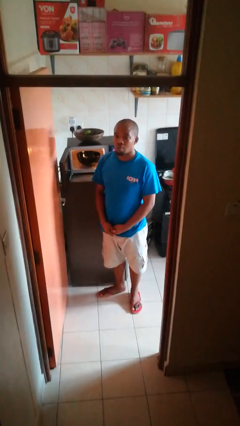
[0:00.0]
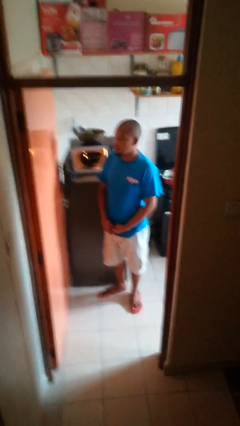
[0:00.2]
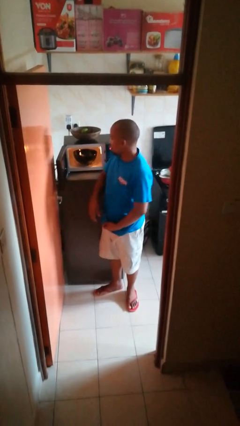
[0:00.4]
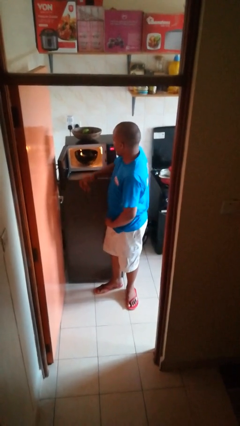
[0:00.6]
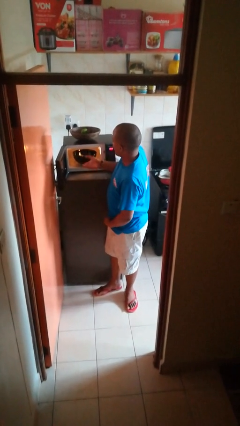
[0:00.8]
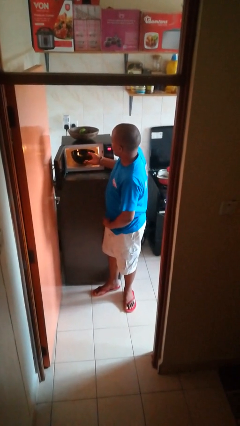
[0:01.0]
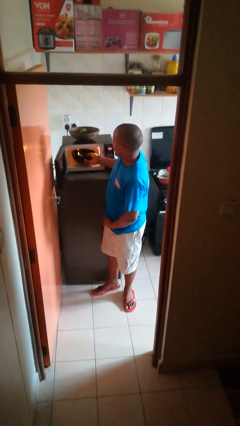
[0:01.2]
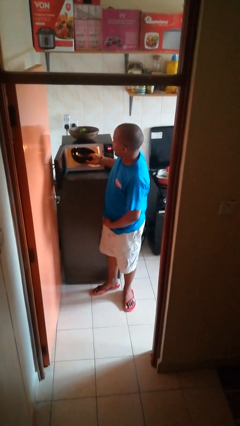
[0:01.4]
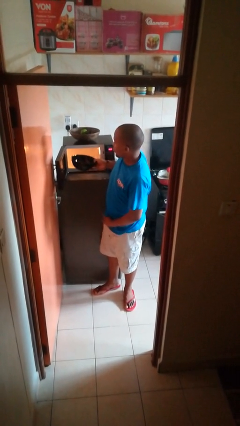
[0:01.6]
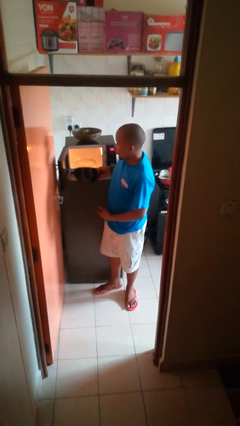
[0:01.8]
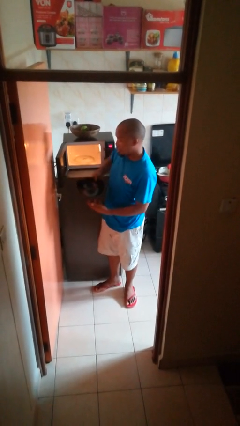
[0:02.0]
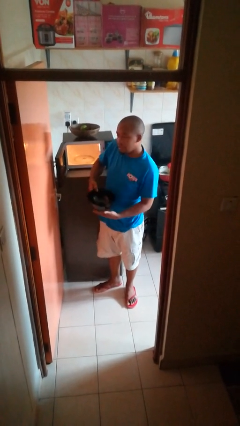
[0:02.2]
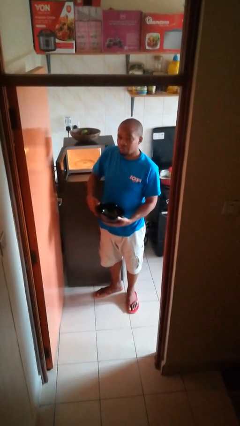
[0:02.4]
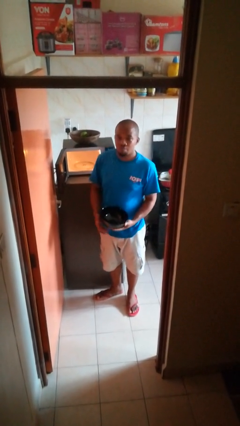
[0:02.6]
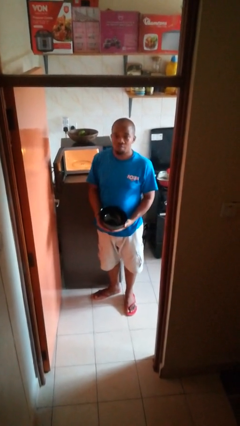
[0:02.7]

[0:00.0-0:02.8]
person takes object from microwave

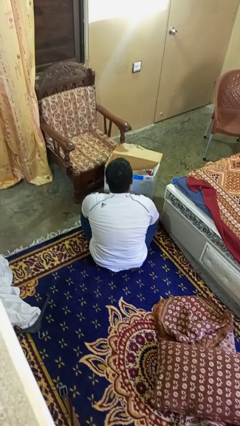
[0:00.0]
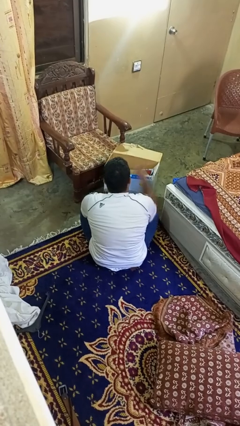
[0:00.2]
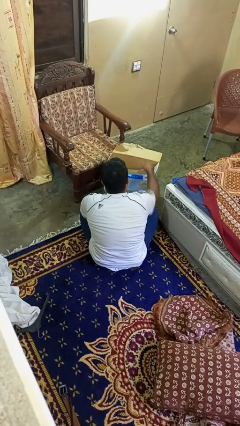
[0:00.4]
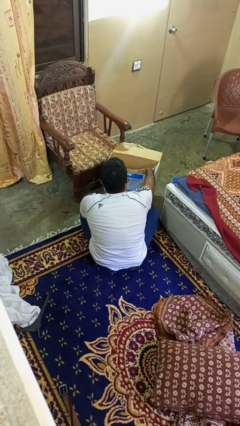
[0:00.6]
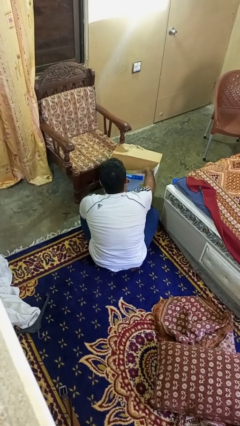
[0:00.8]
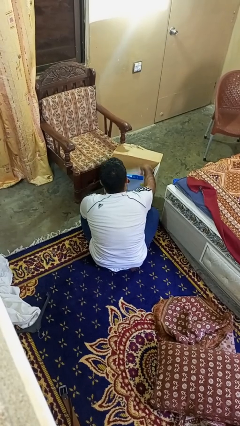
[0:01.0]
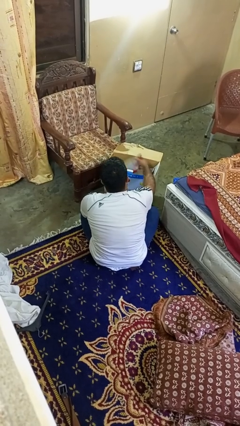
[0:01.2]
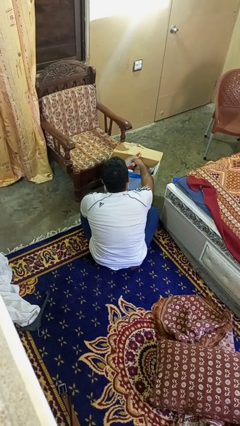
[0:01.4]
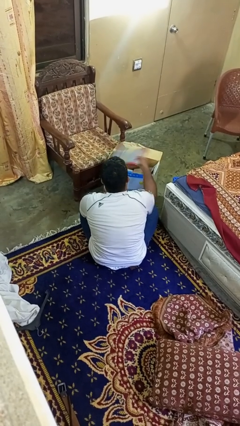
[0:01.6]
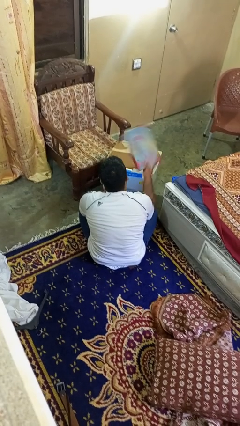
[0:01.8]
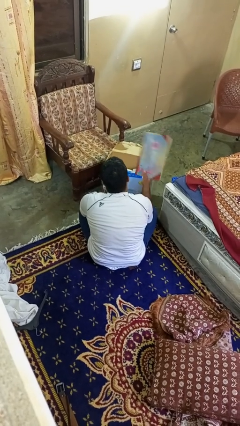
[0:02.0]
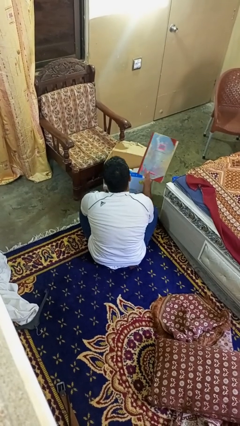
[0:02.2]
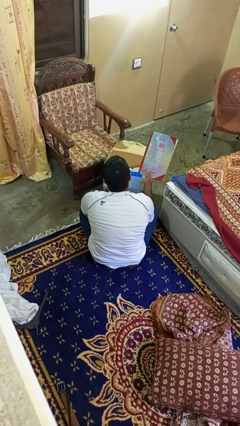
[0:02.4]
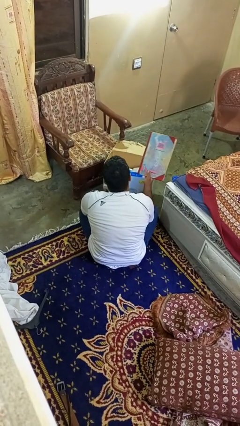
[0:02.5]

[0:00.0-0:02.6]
person takes object from box

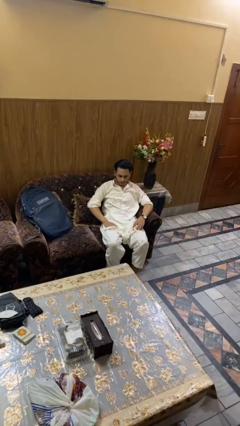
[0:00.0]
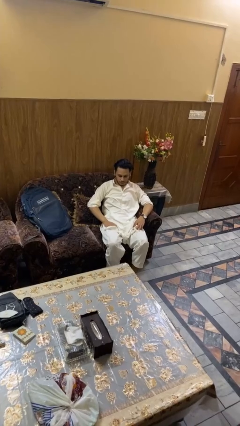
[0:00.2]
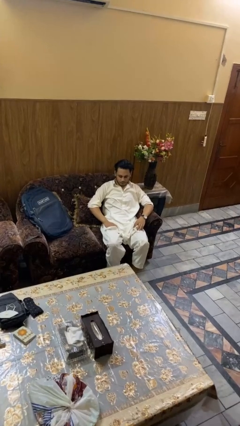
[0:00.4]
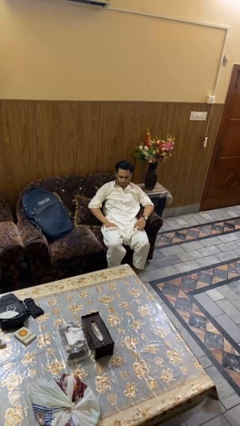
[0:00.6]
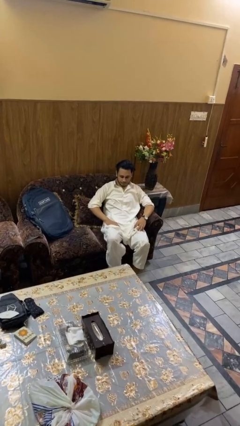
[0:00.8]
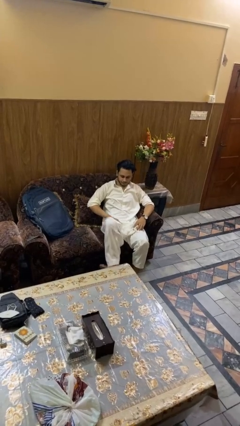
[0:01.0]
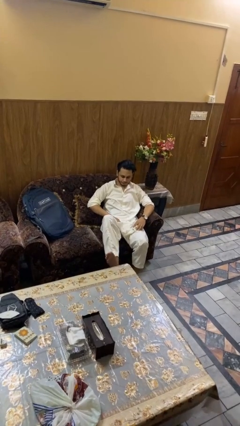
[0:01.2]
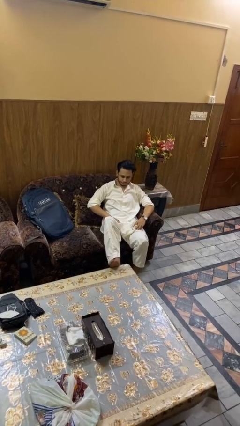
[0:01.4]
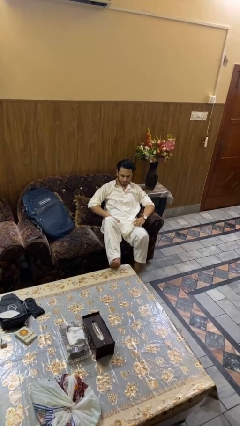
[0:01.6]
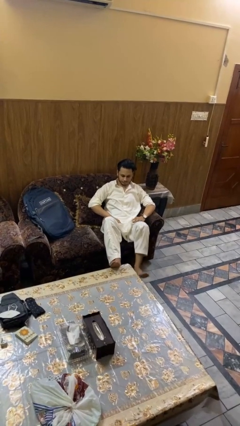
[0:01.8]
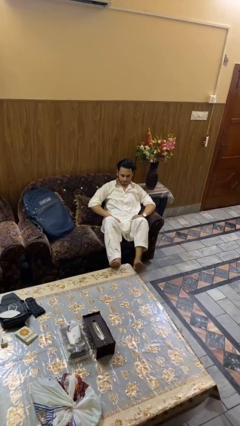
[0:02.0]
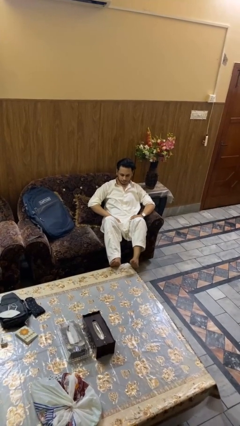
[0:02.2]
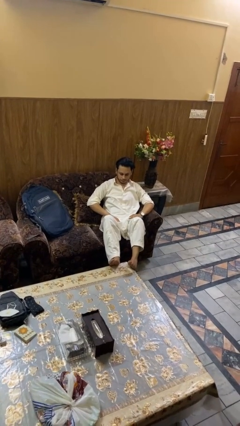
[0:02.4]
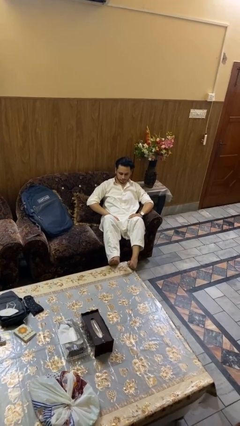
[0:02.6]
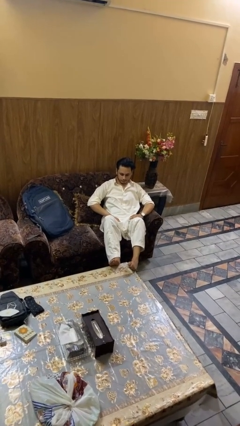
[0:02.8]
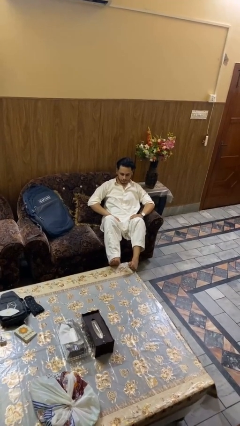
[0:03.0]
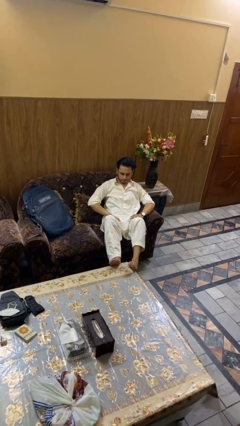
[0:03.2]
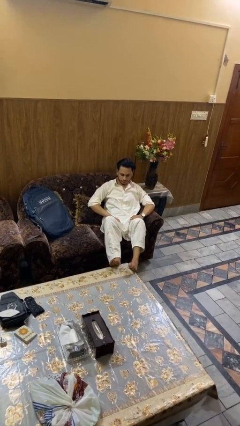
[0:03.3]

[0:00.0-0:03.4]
person puts feet up

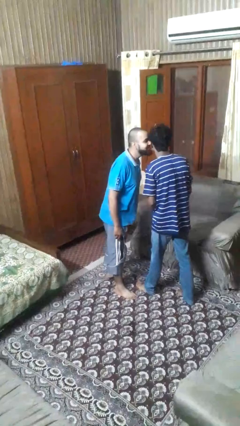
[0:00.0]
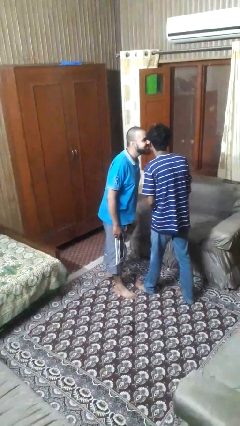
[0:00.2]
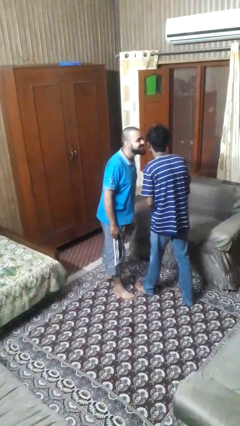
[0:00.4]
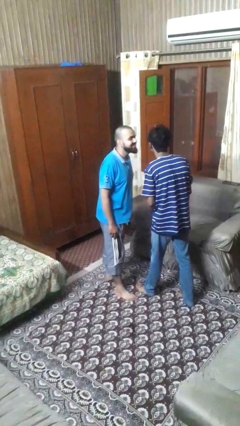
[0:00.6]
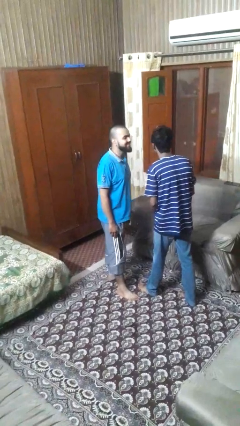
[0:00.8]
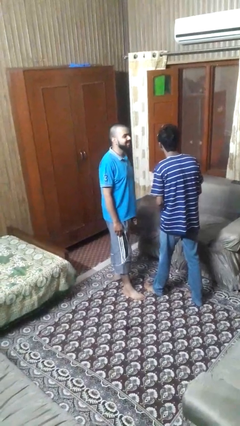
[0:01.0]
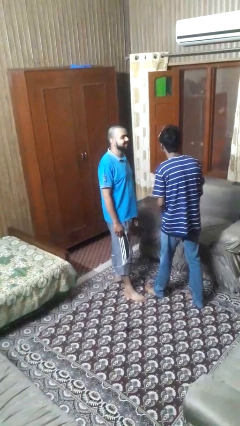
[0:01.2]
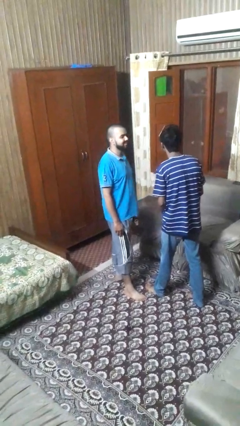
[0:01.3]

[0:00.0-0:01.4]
person kisses cheek of person

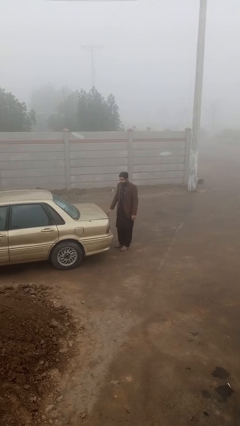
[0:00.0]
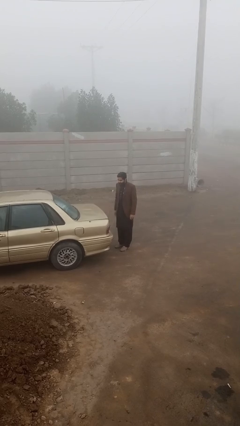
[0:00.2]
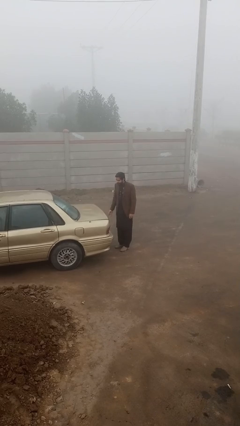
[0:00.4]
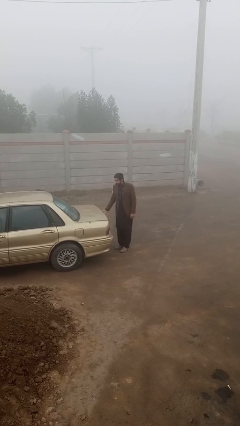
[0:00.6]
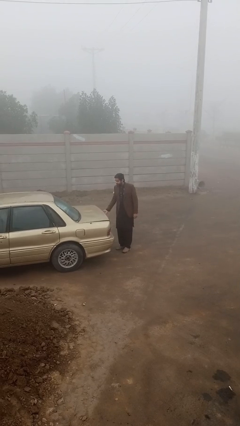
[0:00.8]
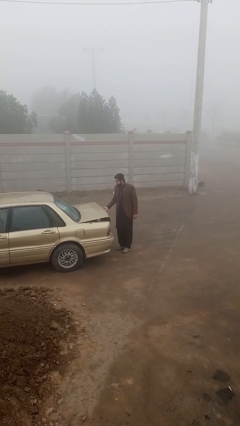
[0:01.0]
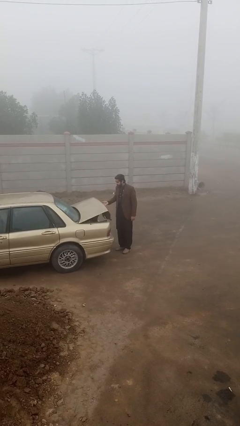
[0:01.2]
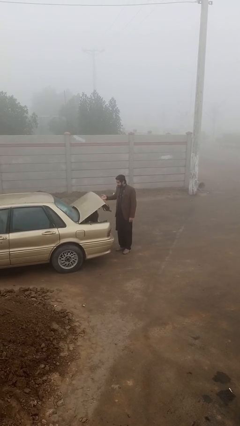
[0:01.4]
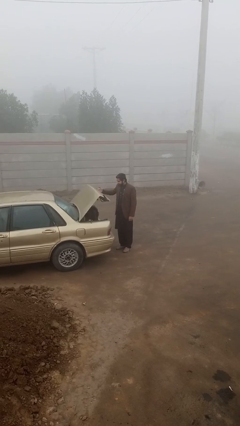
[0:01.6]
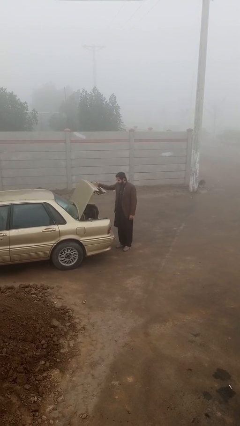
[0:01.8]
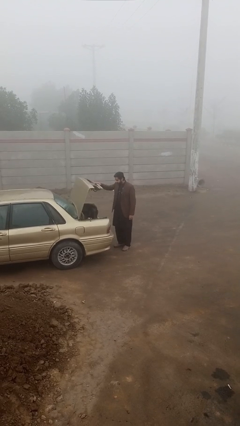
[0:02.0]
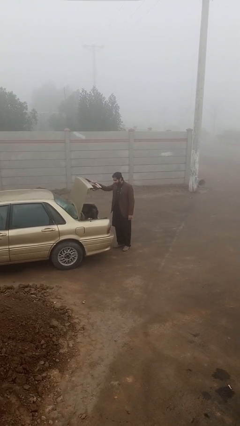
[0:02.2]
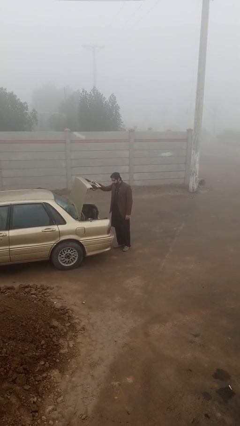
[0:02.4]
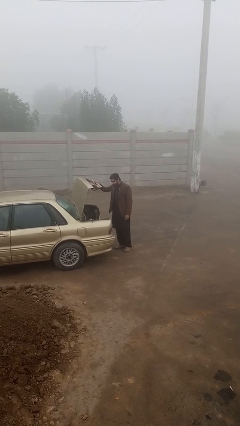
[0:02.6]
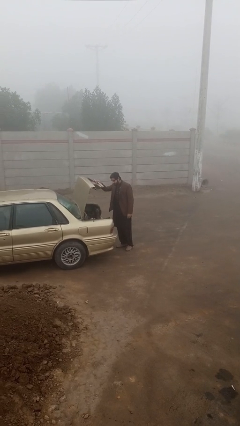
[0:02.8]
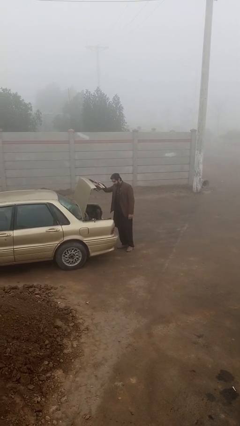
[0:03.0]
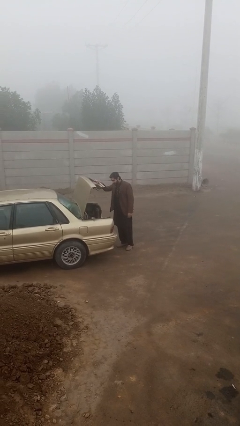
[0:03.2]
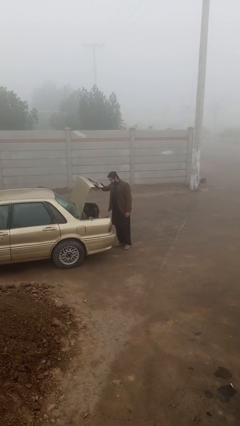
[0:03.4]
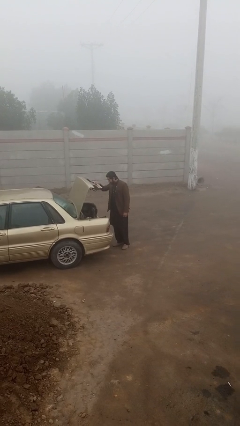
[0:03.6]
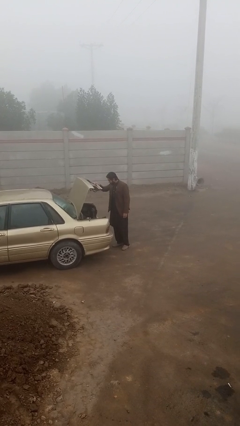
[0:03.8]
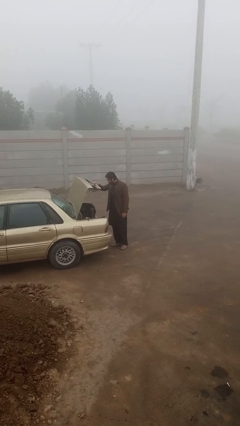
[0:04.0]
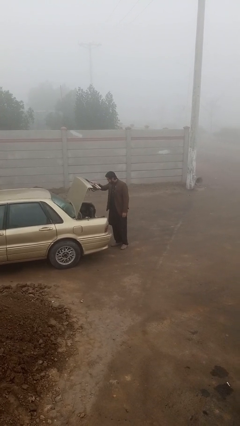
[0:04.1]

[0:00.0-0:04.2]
person opens car trunk

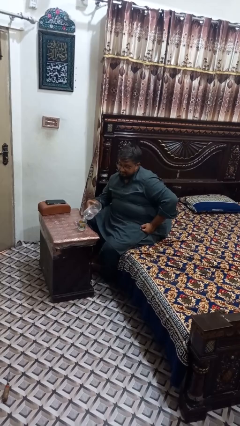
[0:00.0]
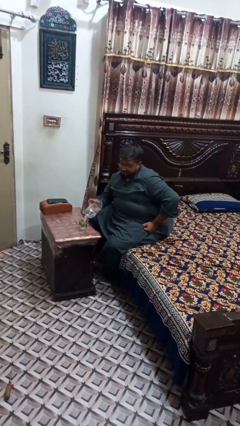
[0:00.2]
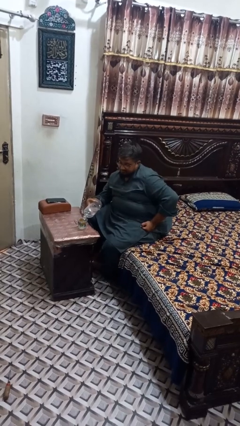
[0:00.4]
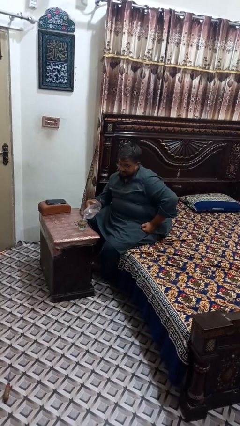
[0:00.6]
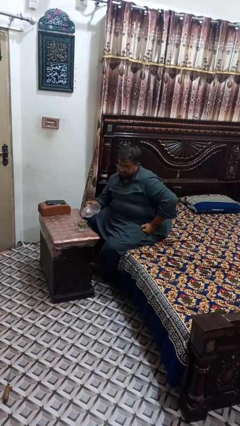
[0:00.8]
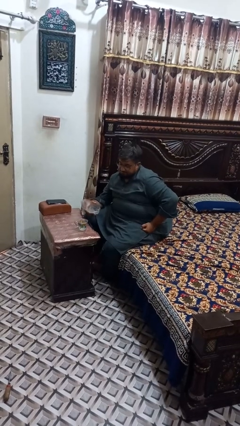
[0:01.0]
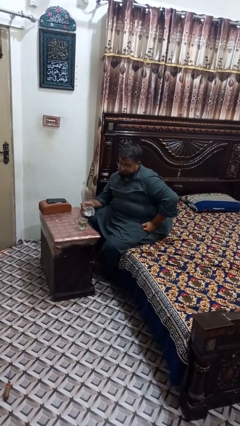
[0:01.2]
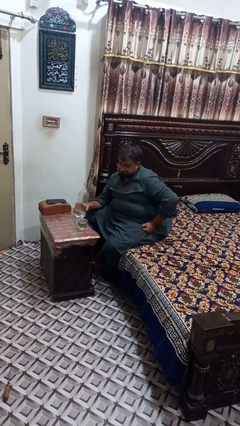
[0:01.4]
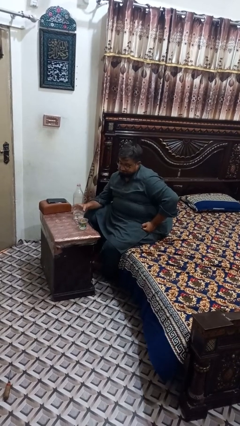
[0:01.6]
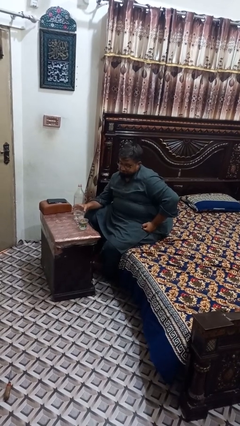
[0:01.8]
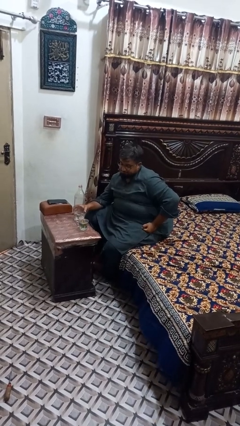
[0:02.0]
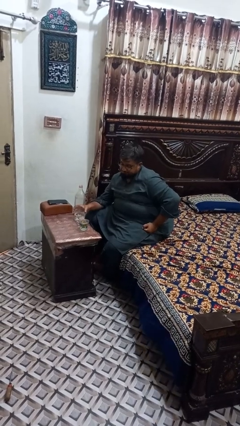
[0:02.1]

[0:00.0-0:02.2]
person pours liquid into cup

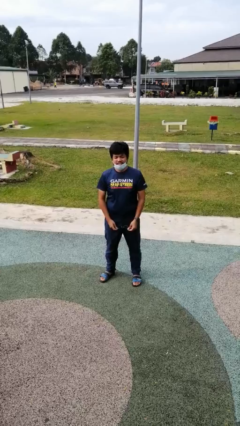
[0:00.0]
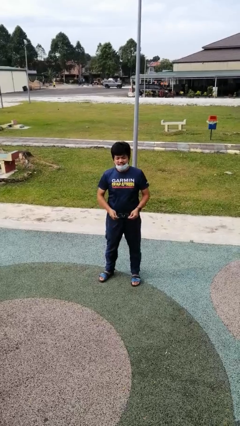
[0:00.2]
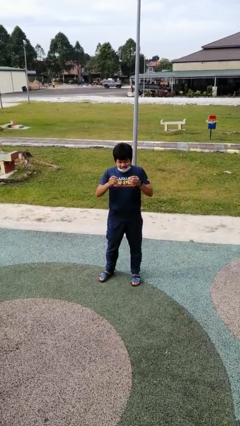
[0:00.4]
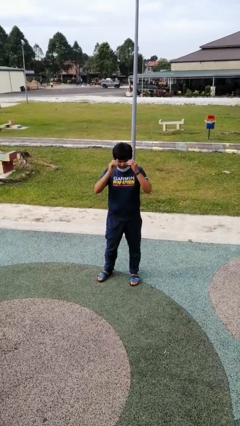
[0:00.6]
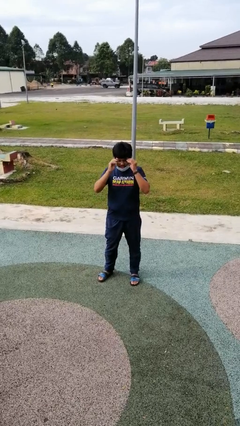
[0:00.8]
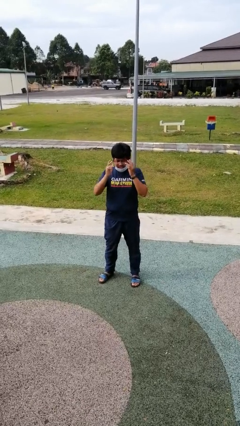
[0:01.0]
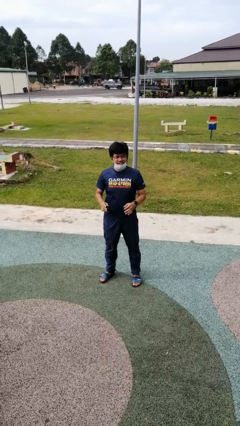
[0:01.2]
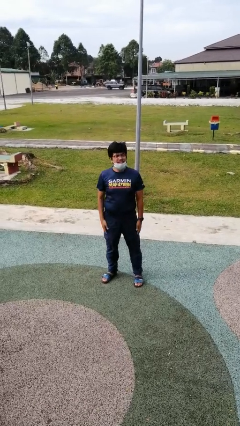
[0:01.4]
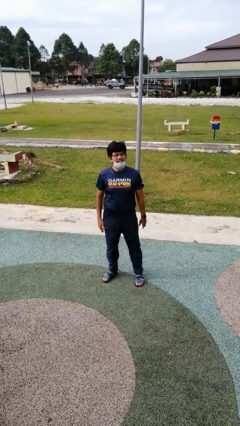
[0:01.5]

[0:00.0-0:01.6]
person puts on glasses
